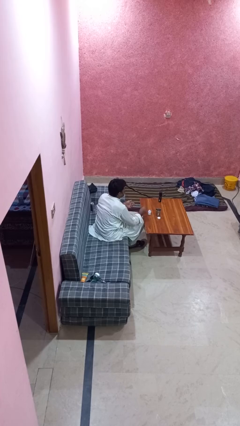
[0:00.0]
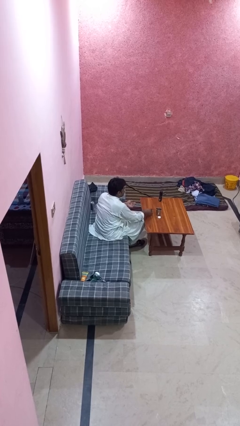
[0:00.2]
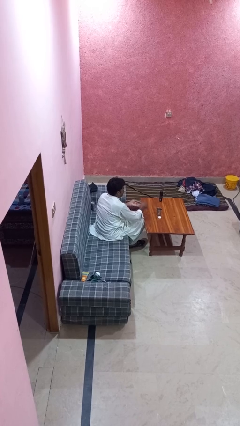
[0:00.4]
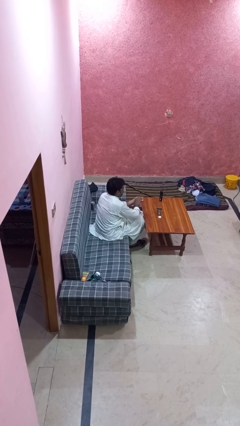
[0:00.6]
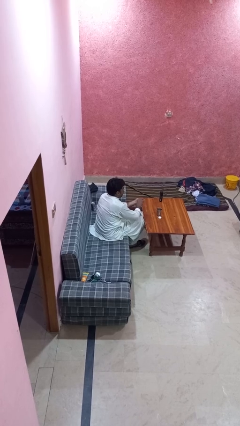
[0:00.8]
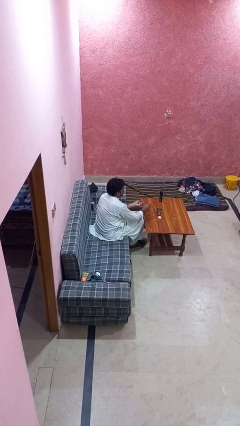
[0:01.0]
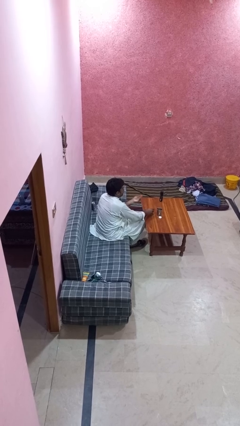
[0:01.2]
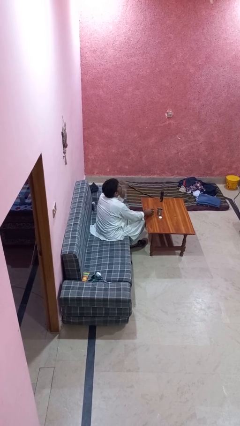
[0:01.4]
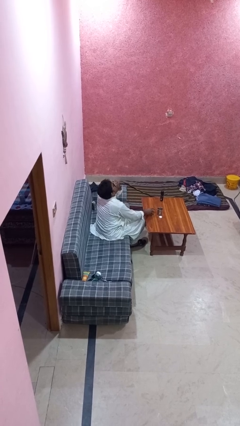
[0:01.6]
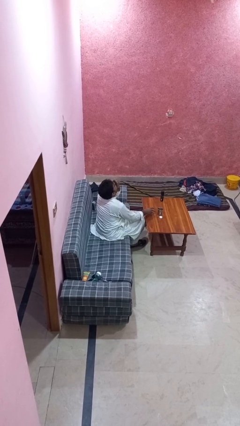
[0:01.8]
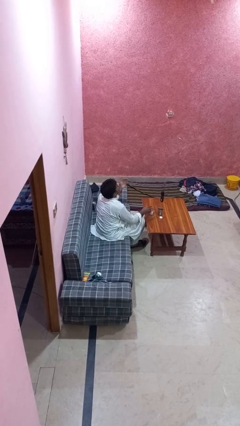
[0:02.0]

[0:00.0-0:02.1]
person takes medicine pills

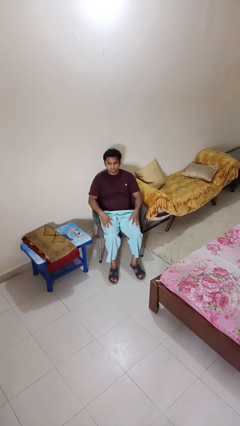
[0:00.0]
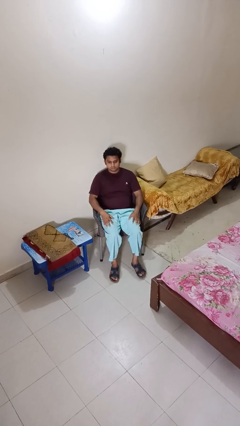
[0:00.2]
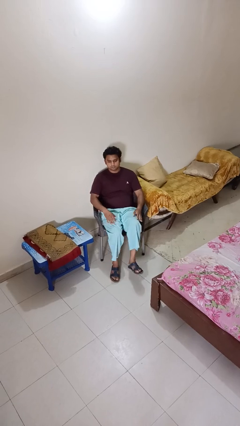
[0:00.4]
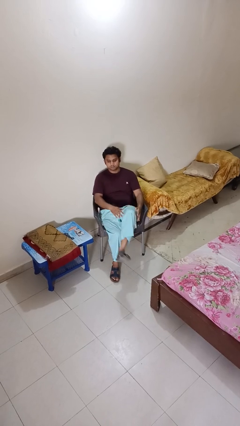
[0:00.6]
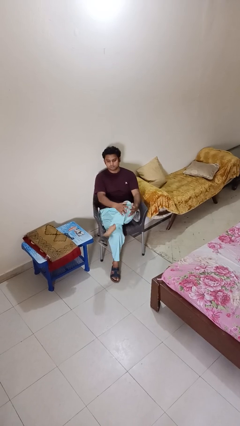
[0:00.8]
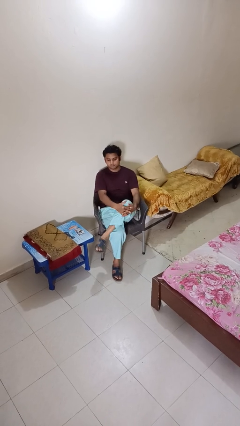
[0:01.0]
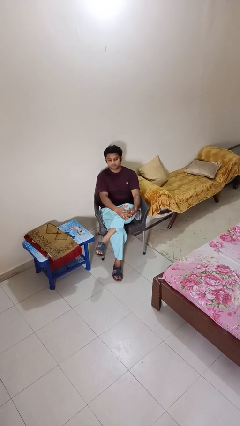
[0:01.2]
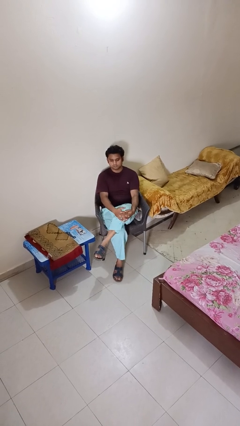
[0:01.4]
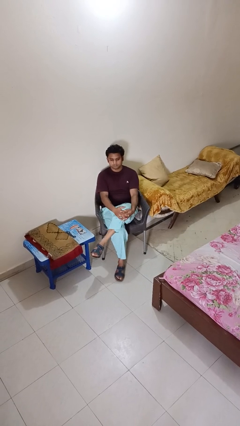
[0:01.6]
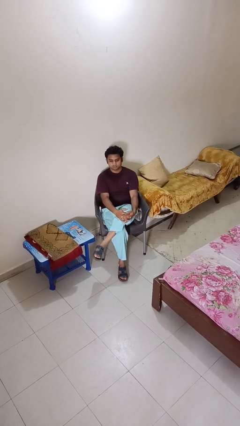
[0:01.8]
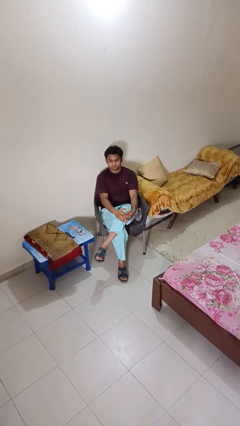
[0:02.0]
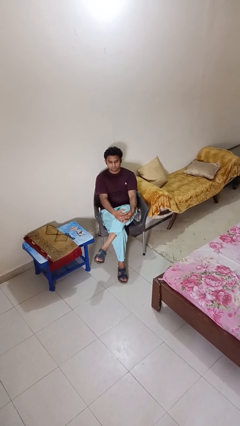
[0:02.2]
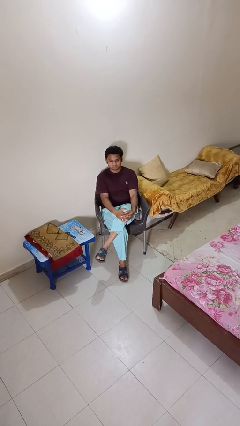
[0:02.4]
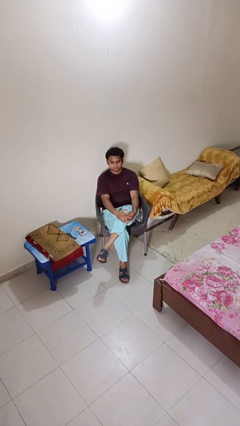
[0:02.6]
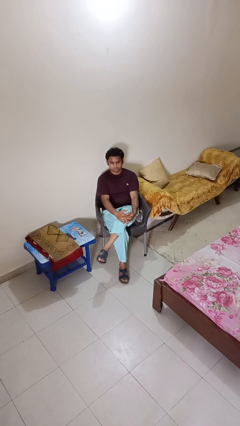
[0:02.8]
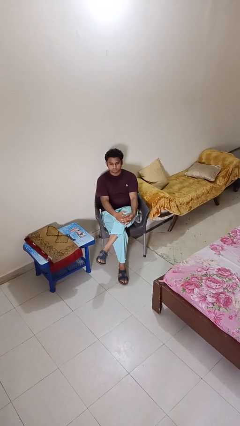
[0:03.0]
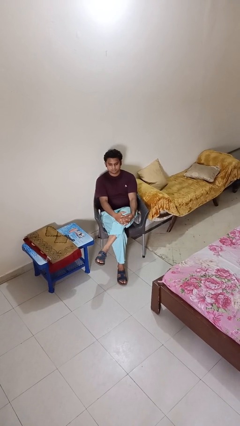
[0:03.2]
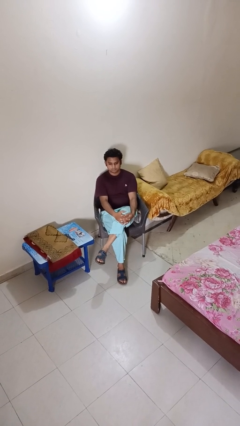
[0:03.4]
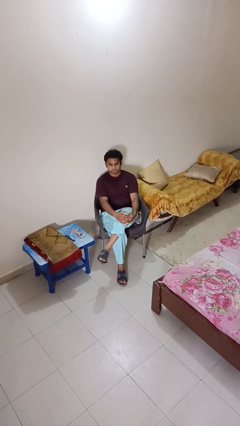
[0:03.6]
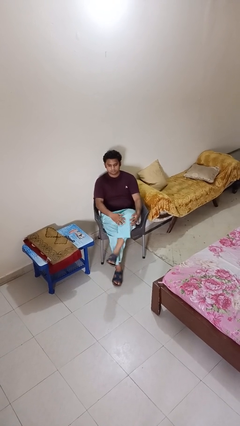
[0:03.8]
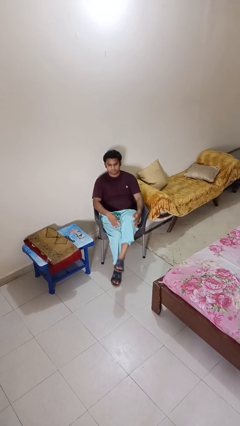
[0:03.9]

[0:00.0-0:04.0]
person crosses legs

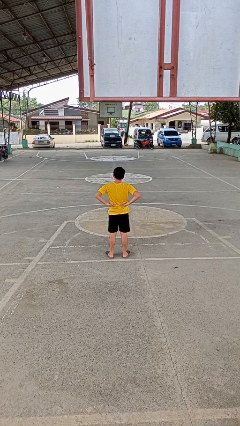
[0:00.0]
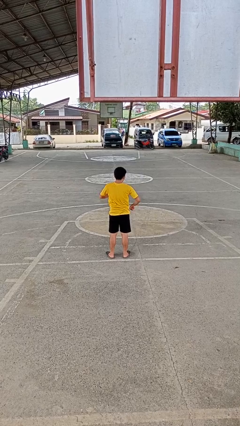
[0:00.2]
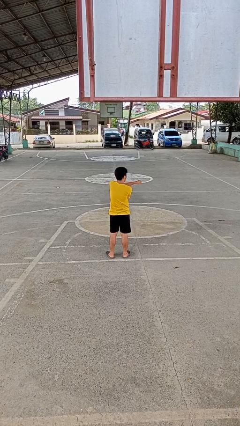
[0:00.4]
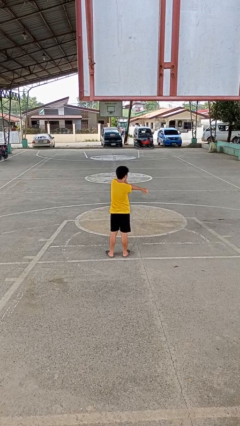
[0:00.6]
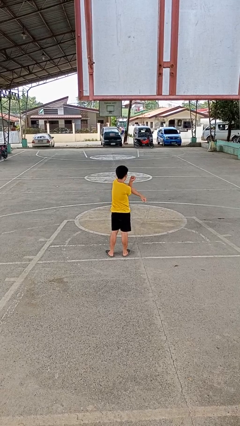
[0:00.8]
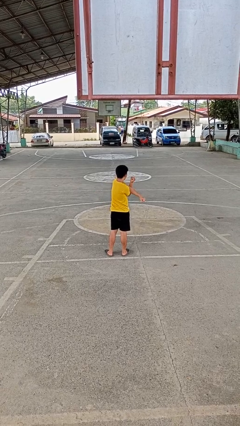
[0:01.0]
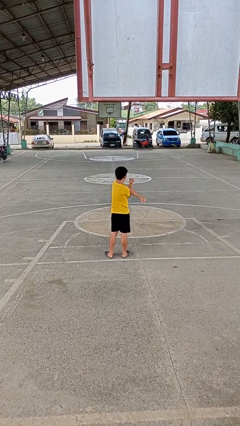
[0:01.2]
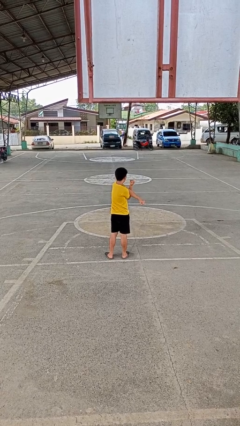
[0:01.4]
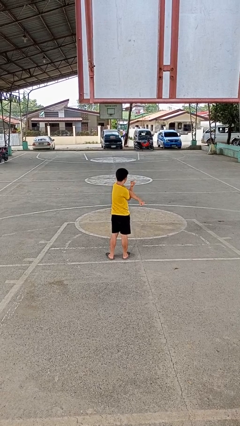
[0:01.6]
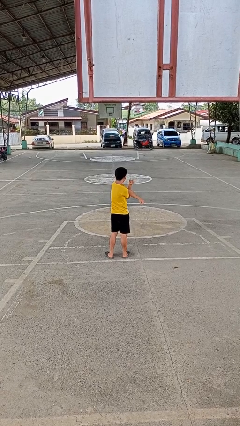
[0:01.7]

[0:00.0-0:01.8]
person stretches arms to side

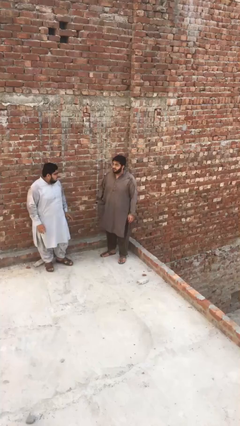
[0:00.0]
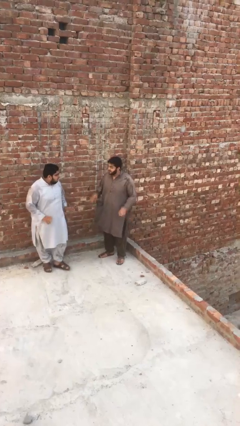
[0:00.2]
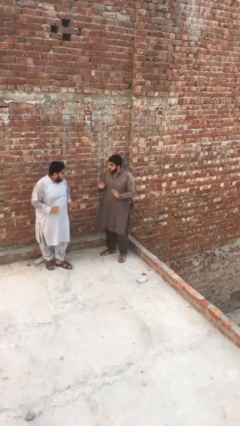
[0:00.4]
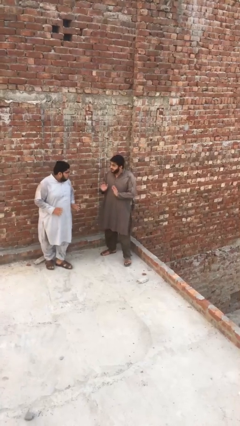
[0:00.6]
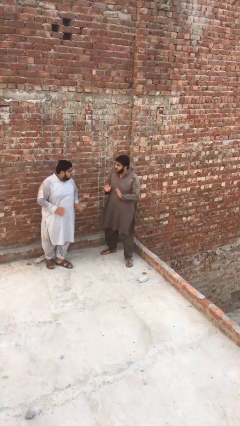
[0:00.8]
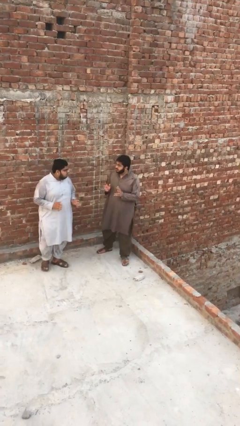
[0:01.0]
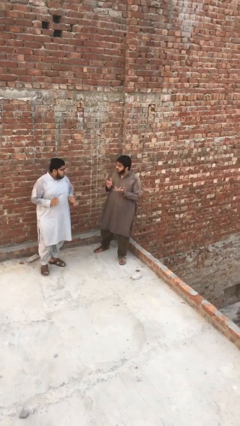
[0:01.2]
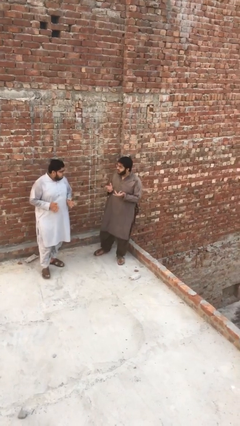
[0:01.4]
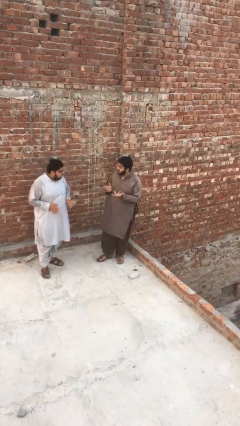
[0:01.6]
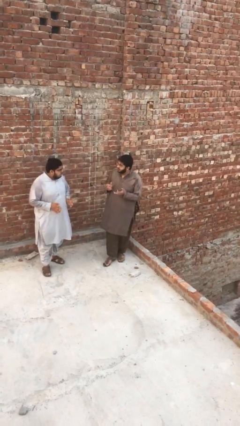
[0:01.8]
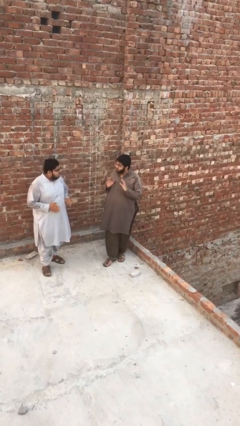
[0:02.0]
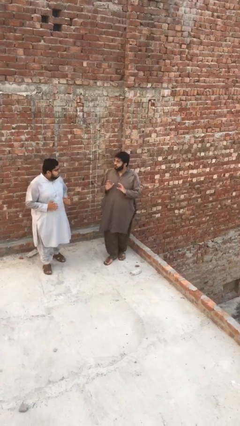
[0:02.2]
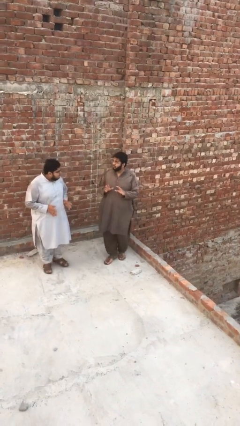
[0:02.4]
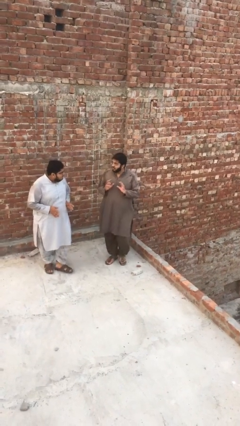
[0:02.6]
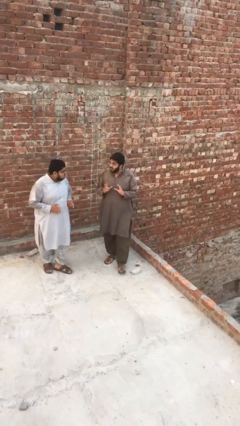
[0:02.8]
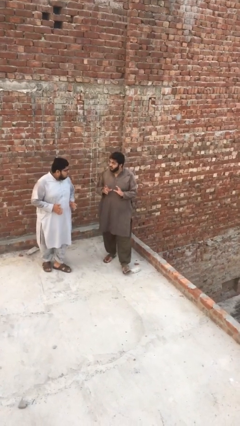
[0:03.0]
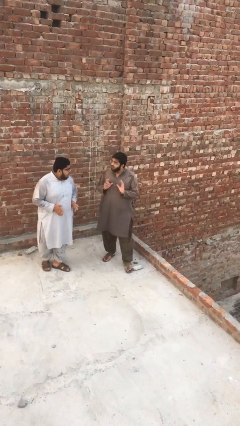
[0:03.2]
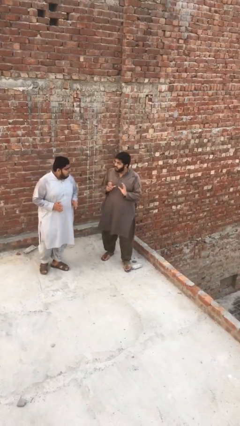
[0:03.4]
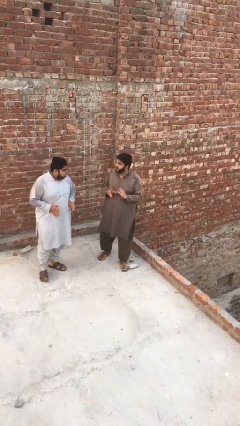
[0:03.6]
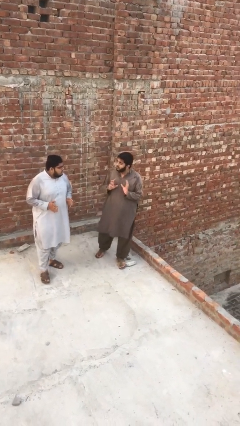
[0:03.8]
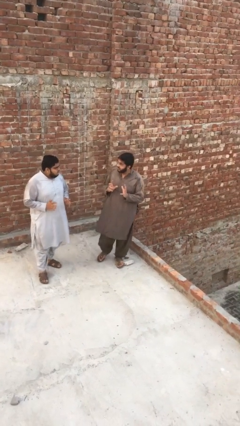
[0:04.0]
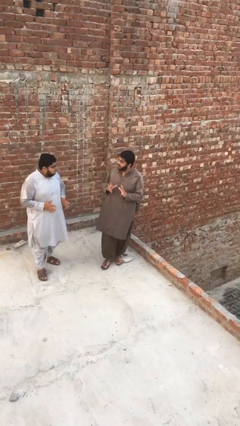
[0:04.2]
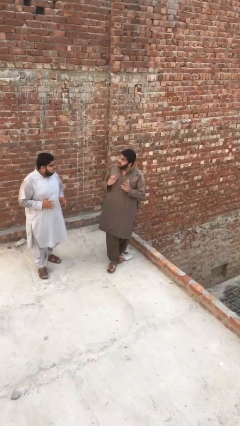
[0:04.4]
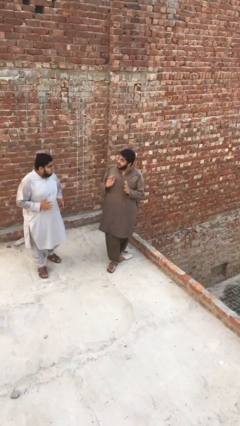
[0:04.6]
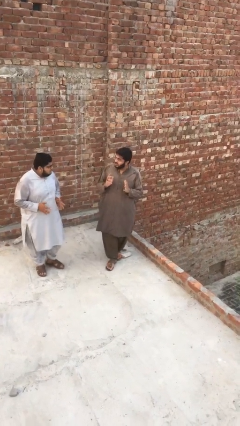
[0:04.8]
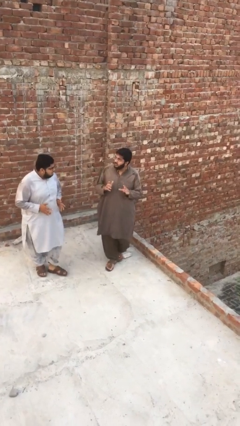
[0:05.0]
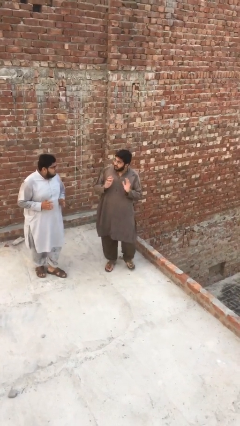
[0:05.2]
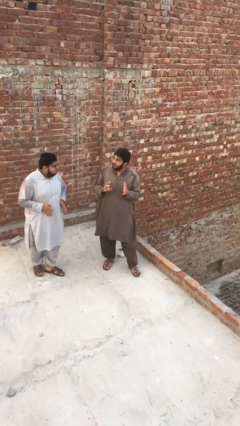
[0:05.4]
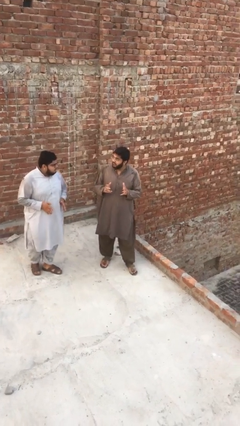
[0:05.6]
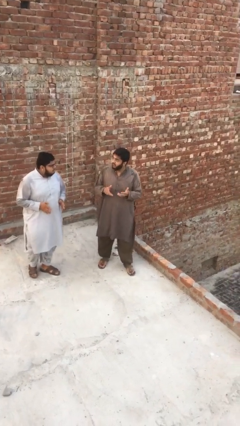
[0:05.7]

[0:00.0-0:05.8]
person talks to person

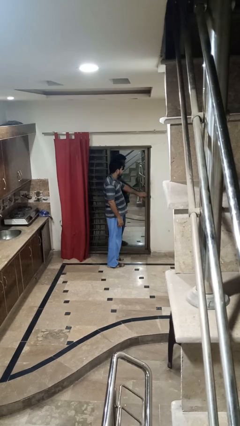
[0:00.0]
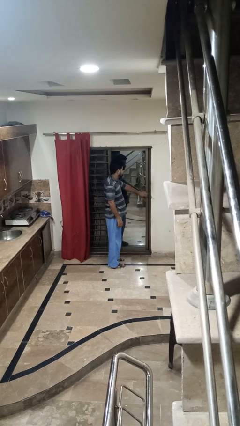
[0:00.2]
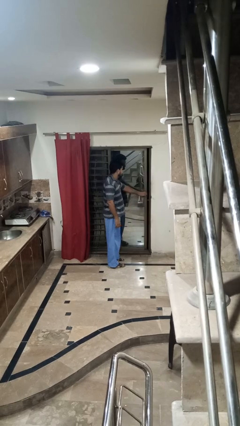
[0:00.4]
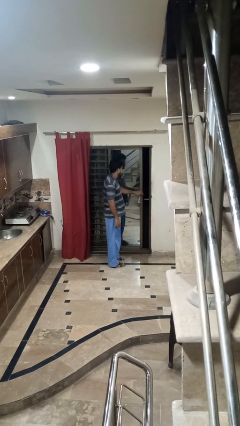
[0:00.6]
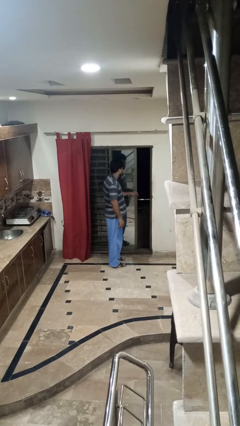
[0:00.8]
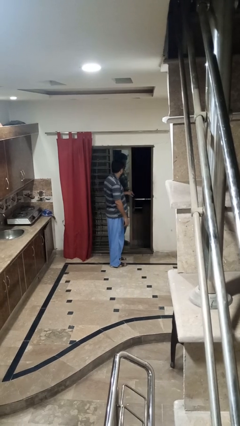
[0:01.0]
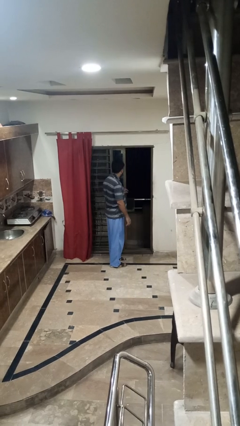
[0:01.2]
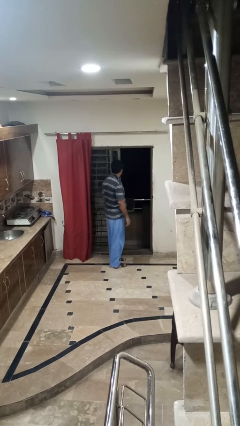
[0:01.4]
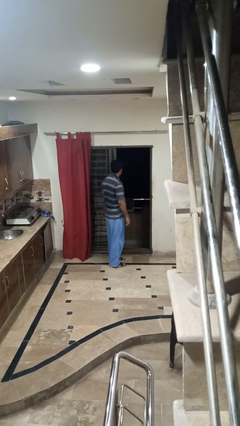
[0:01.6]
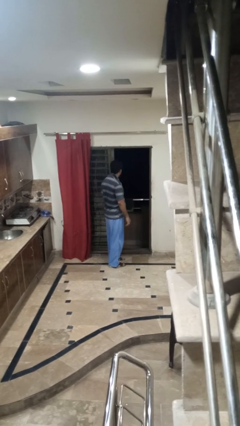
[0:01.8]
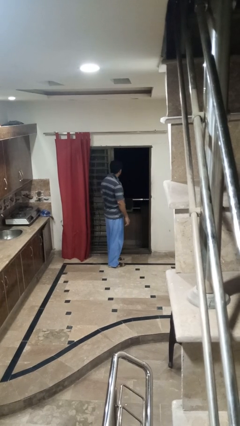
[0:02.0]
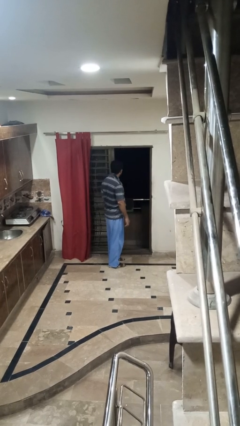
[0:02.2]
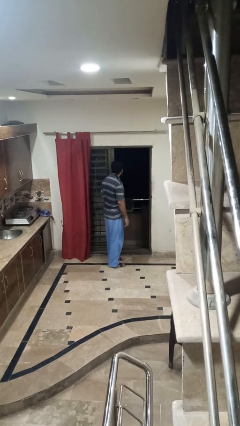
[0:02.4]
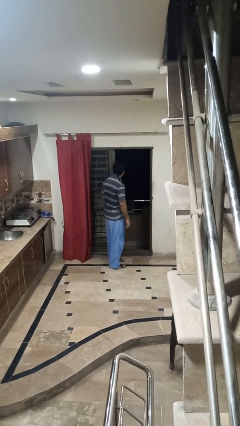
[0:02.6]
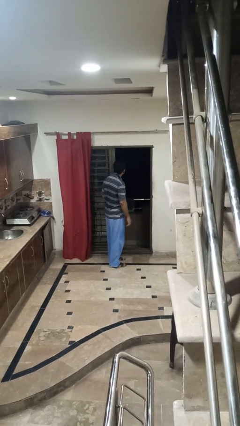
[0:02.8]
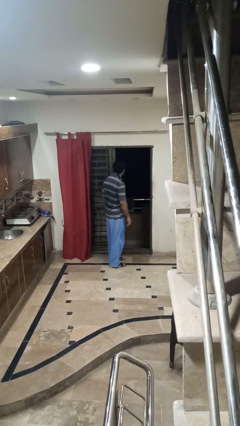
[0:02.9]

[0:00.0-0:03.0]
person opens sliding door

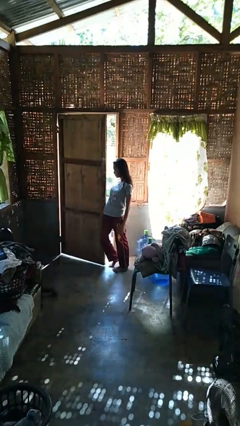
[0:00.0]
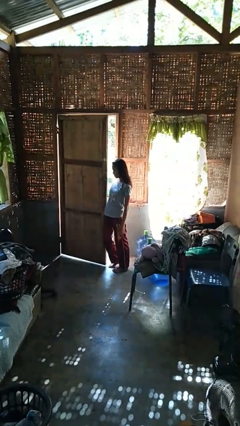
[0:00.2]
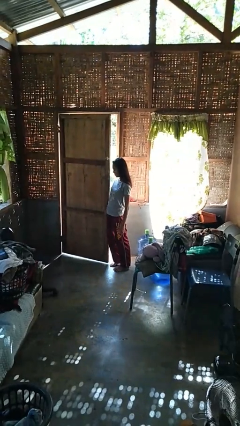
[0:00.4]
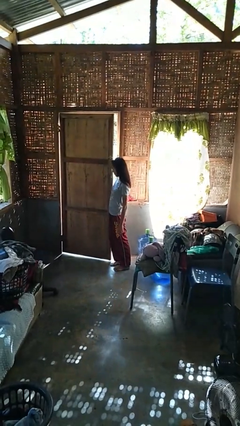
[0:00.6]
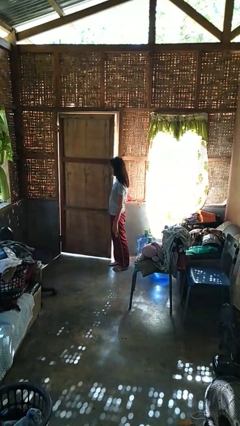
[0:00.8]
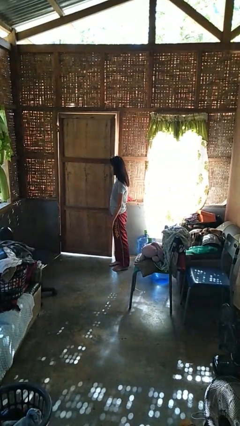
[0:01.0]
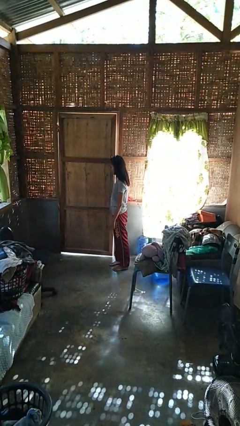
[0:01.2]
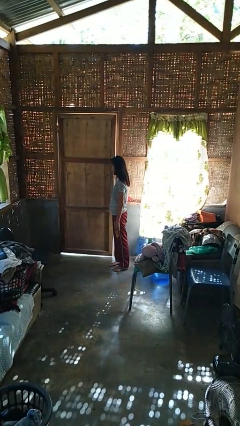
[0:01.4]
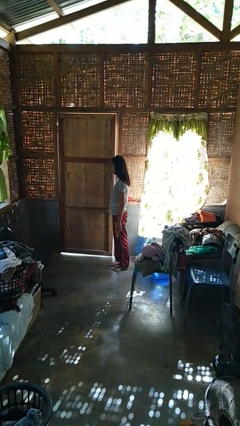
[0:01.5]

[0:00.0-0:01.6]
person closes door with hip
